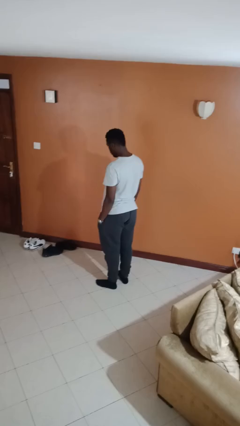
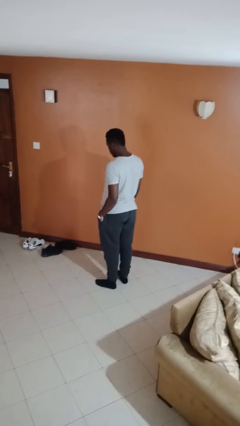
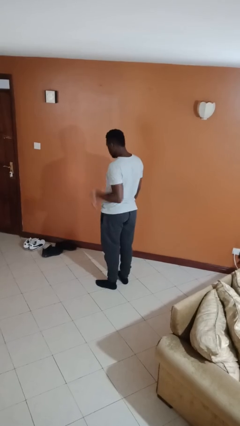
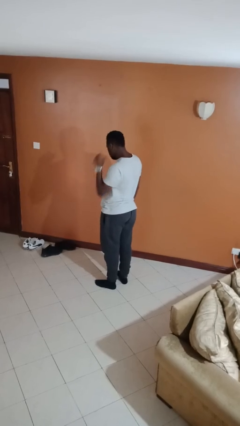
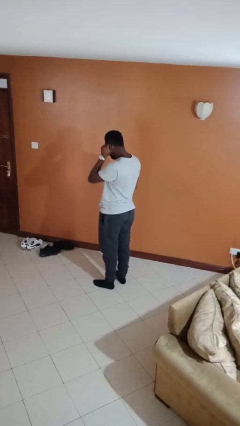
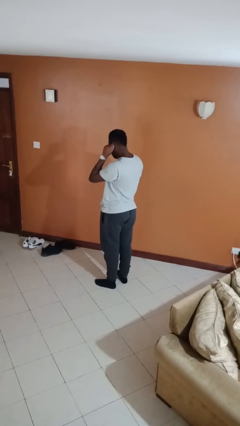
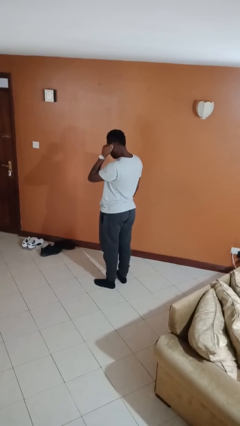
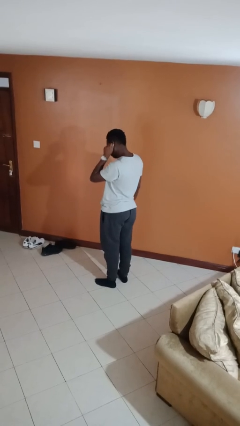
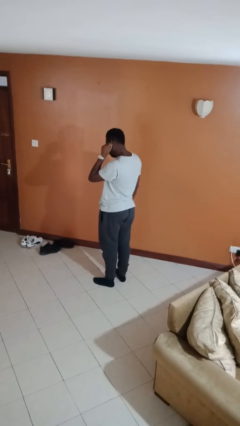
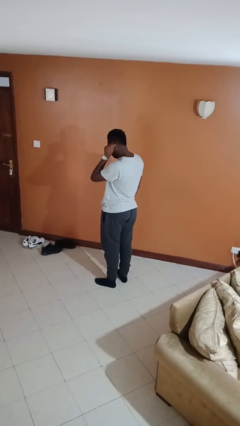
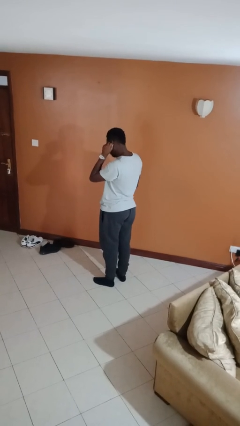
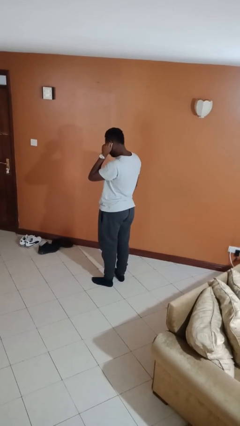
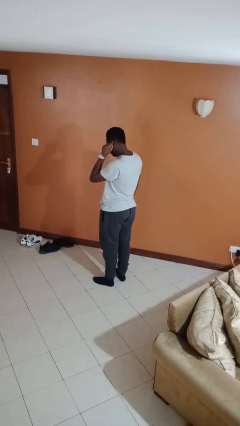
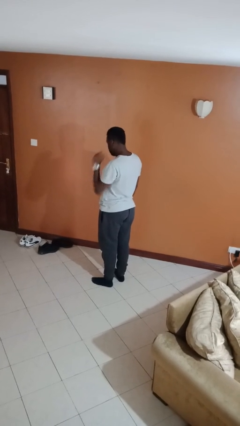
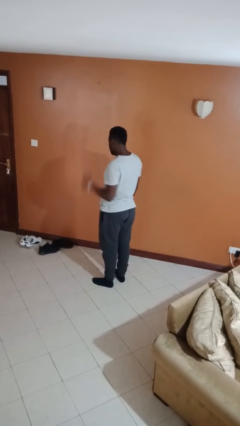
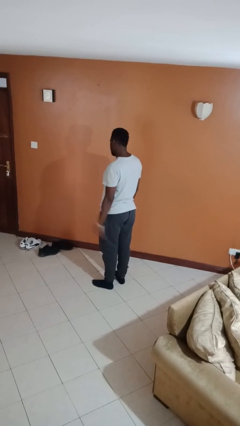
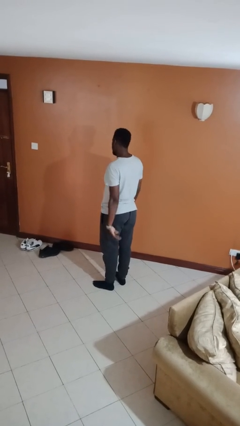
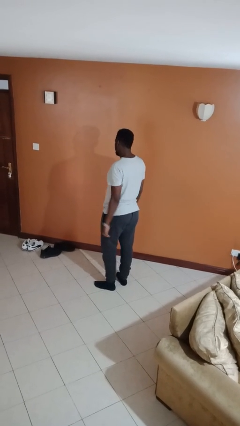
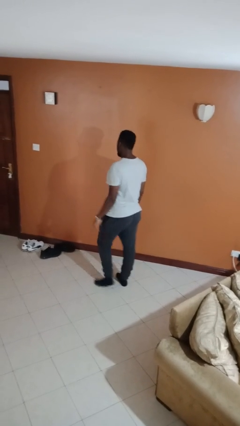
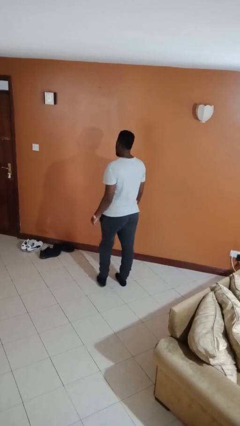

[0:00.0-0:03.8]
person touches earlobe

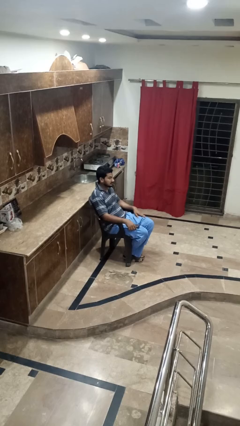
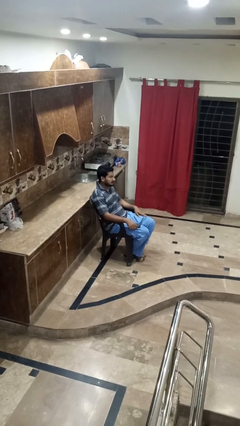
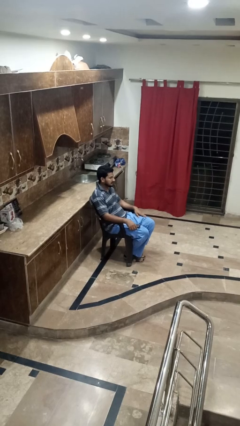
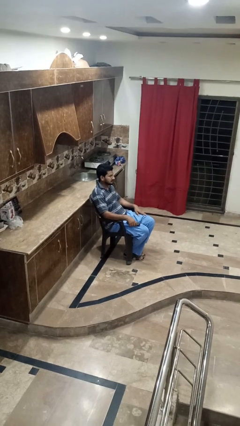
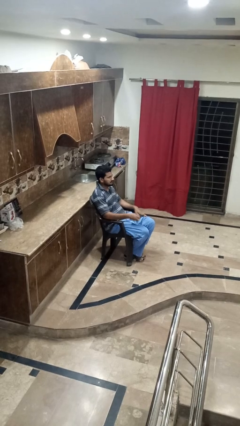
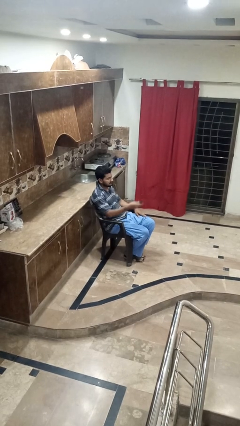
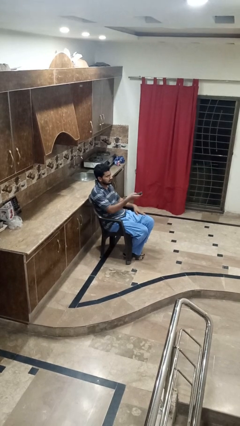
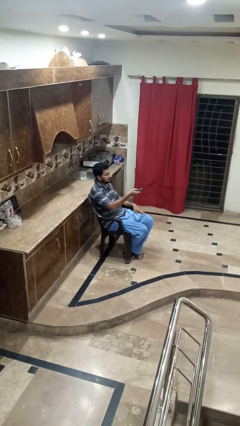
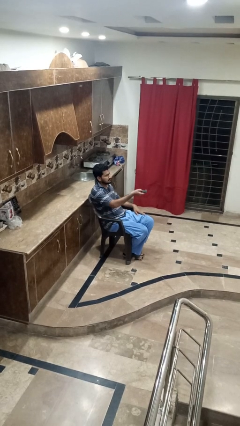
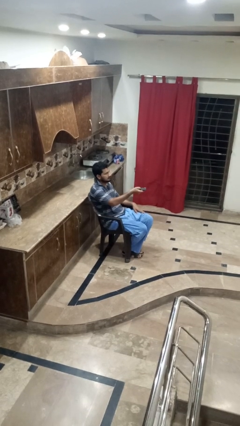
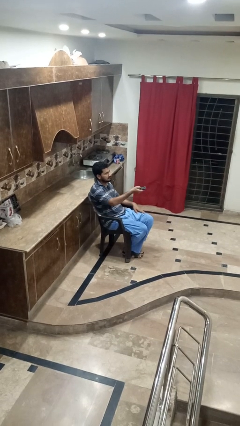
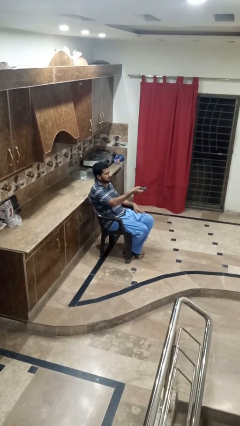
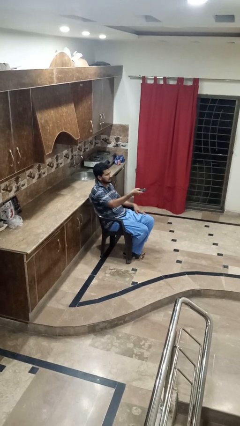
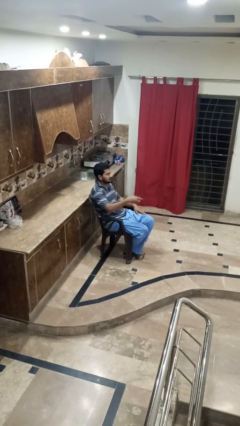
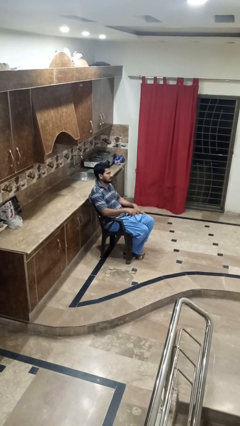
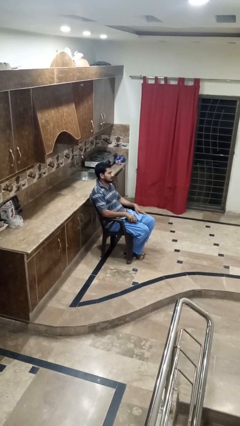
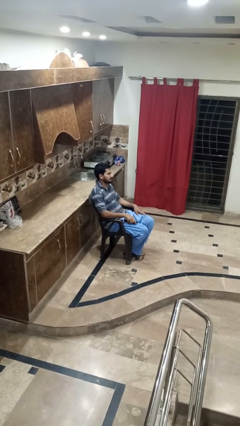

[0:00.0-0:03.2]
person uses television remote

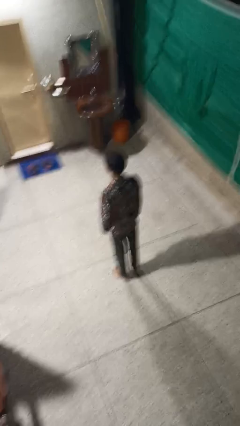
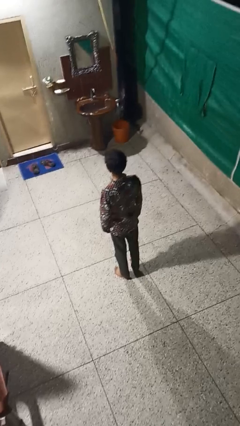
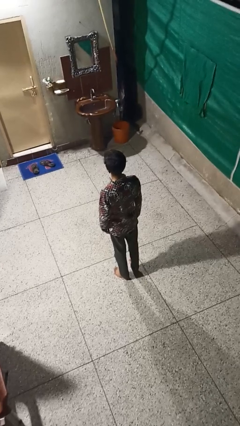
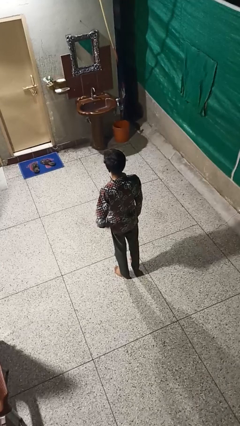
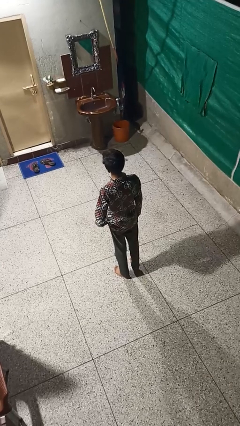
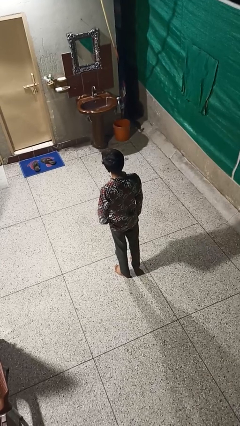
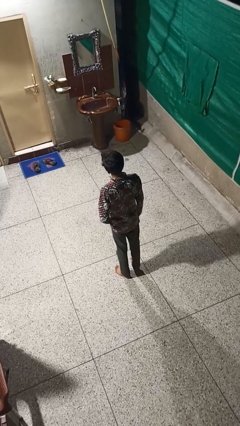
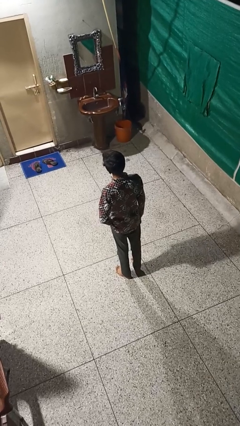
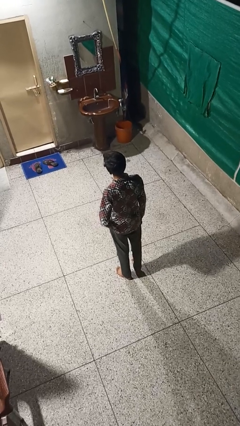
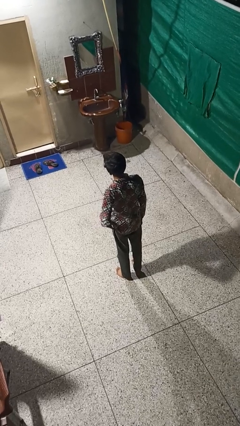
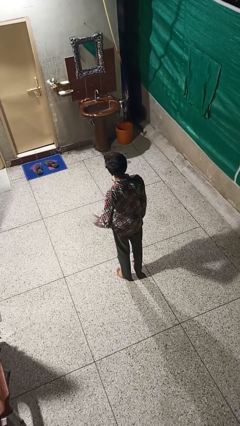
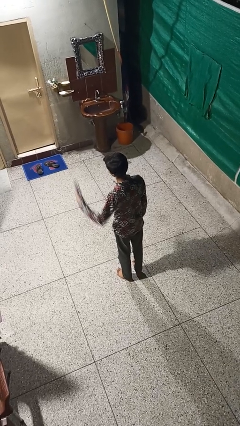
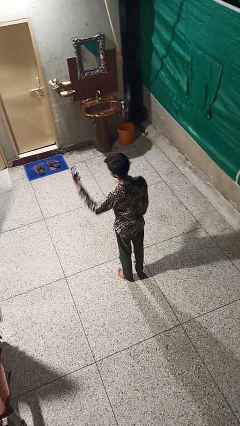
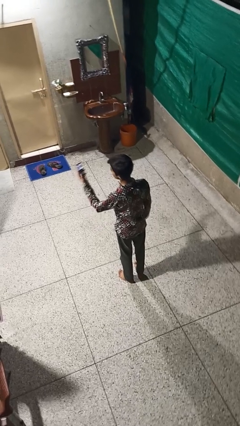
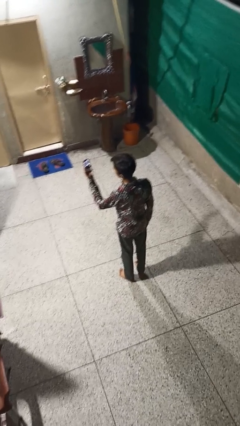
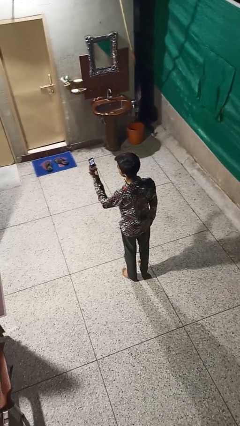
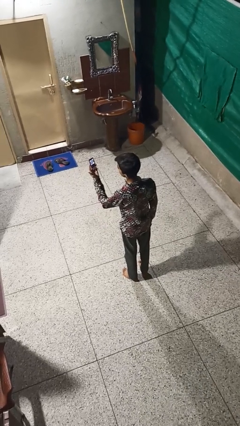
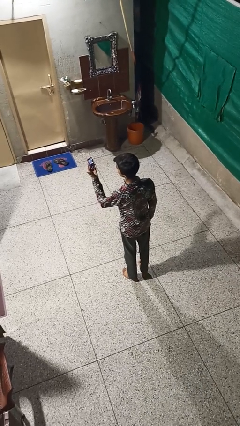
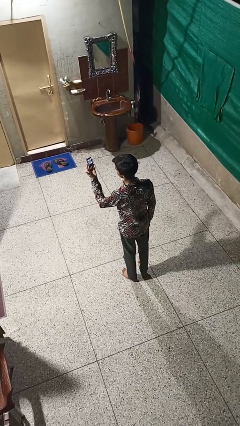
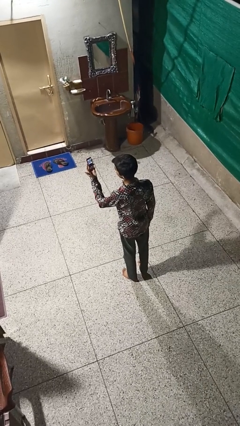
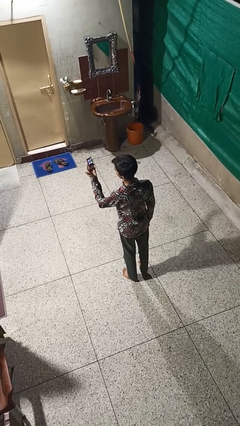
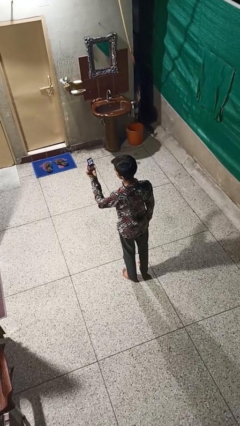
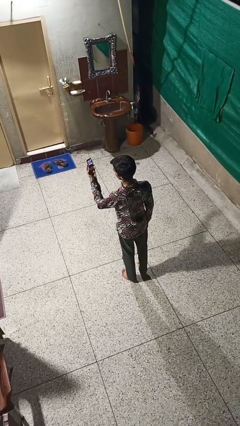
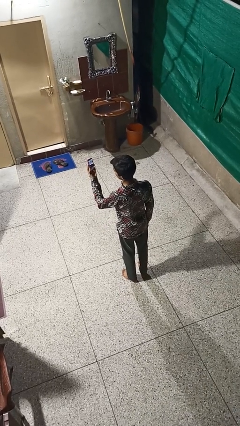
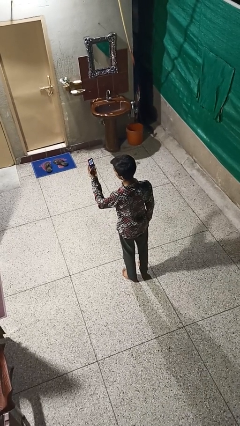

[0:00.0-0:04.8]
person takes phone from pocket

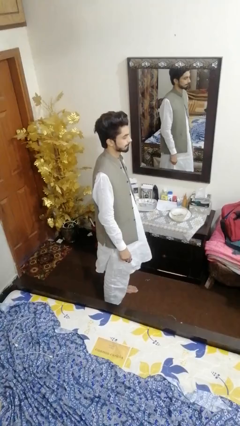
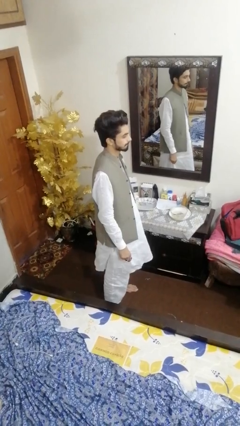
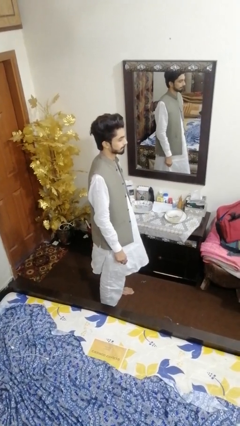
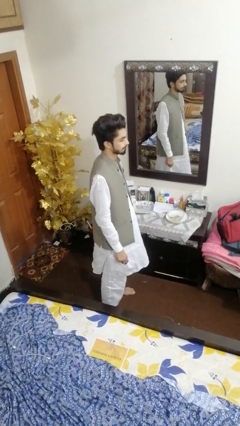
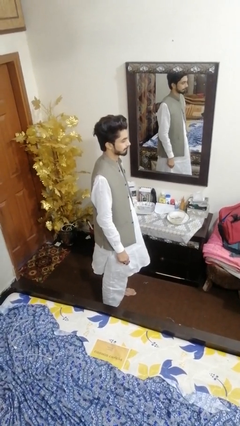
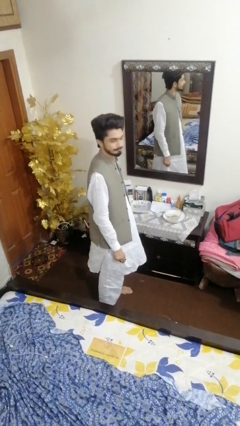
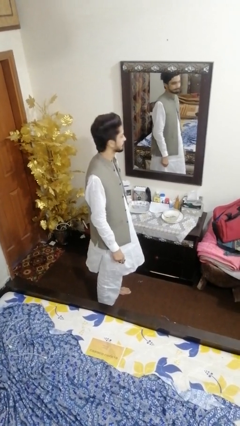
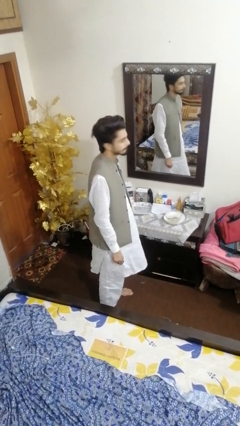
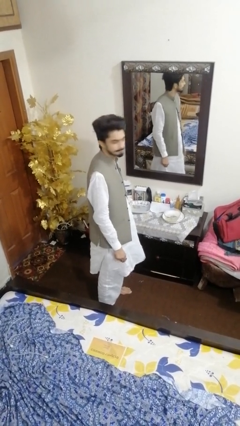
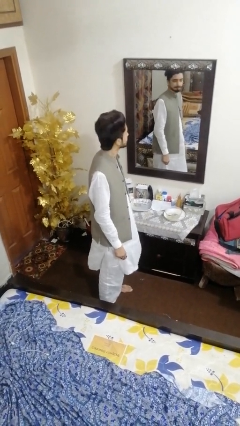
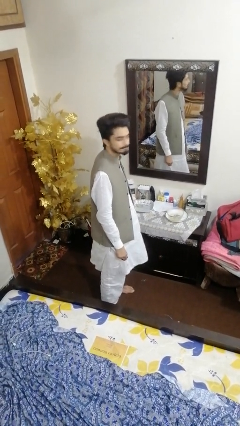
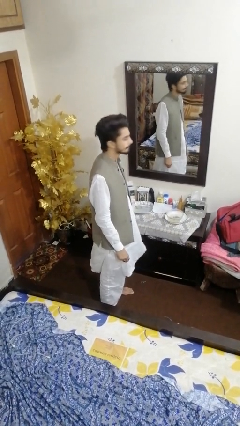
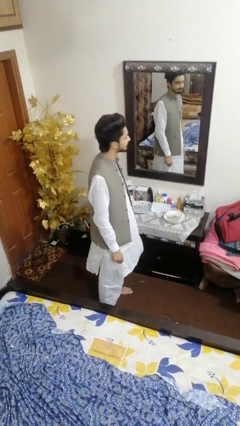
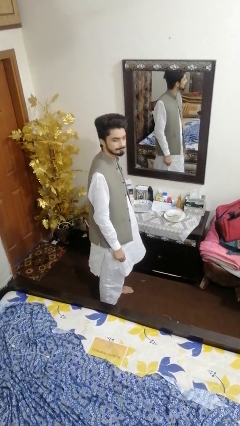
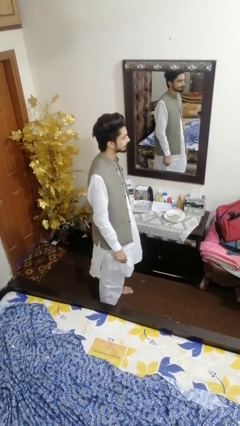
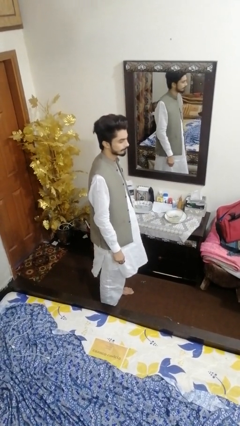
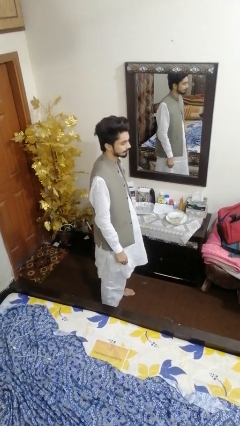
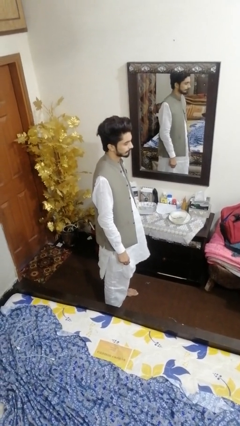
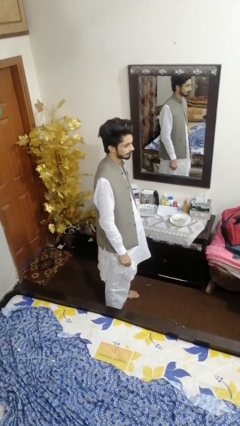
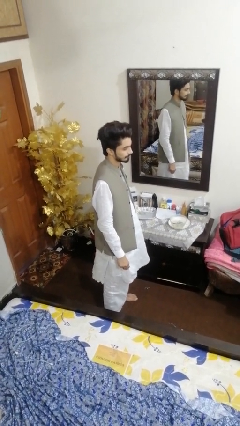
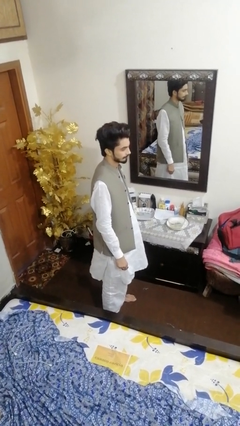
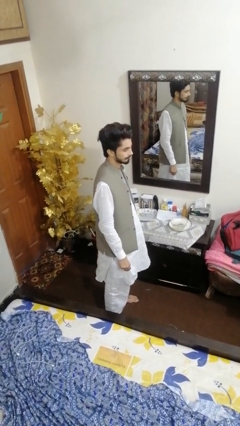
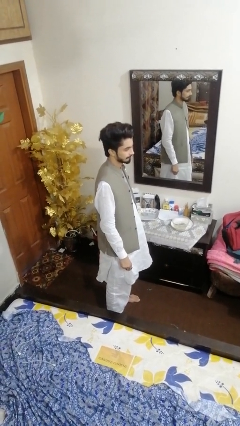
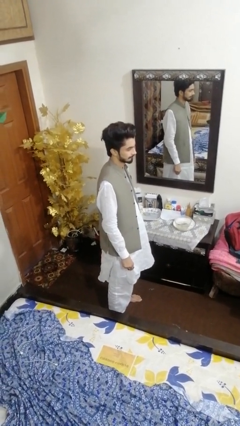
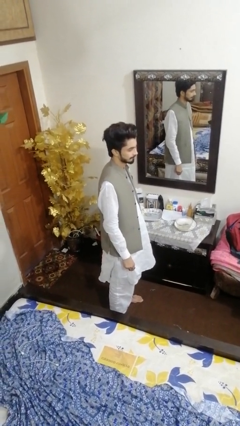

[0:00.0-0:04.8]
person shakes head

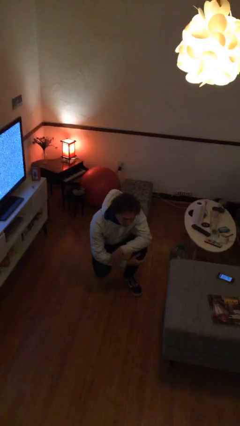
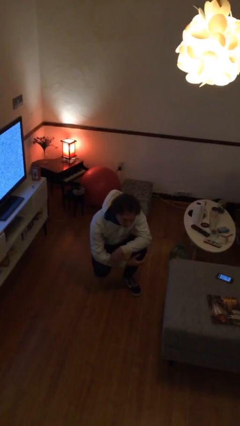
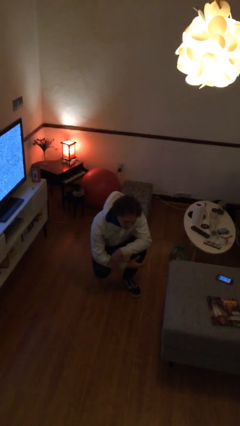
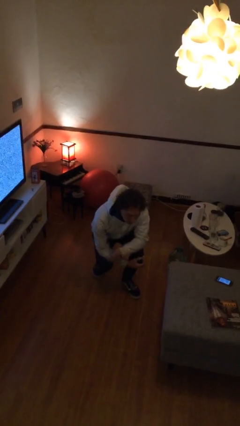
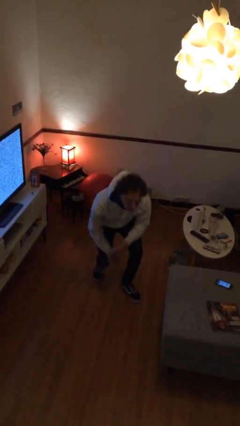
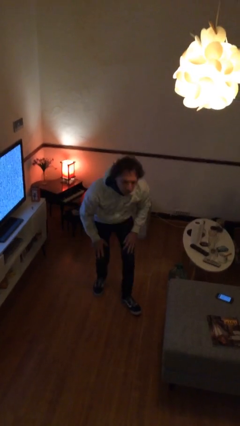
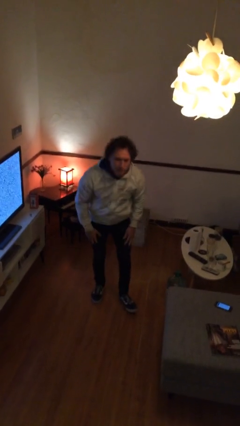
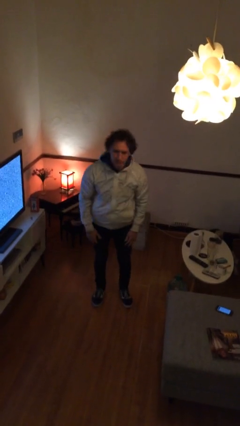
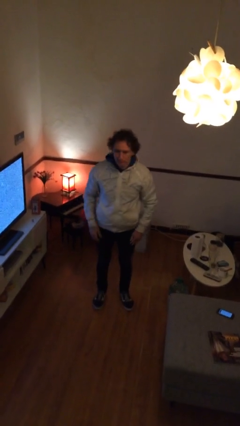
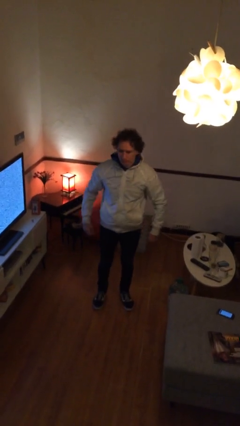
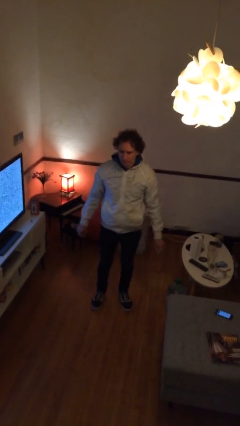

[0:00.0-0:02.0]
person stands up
